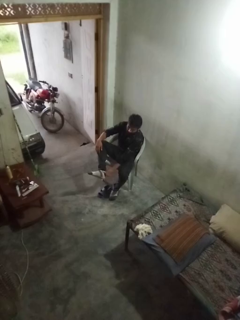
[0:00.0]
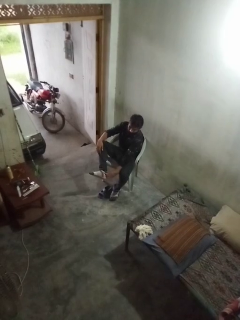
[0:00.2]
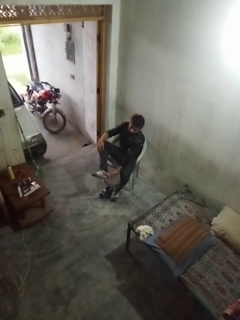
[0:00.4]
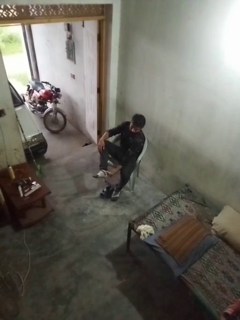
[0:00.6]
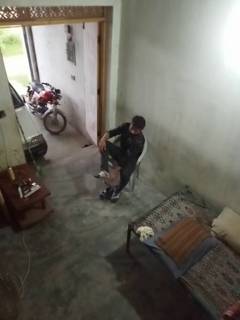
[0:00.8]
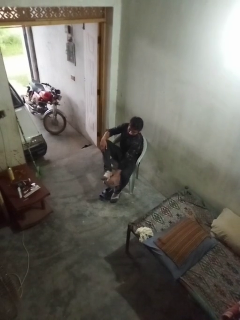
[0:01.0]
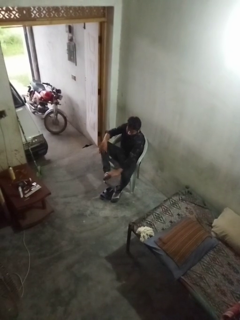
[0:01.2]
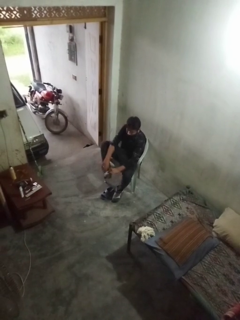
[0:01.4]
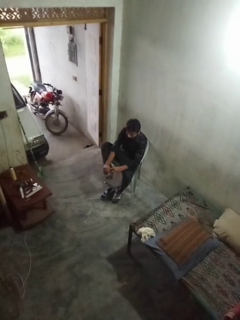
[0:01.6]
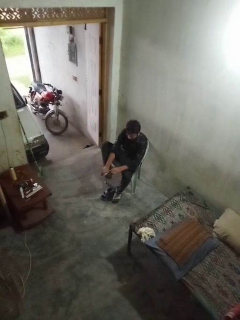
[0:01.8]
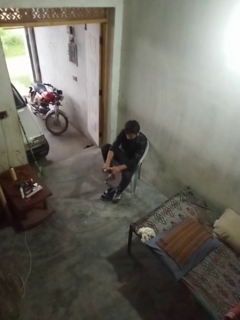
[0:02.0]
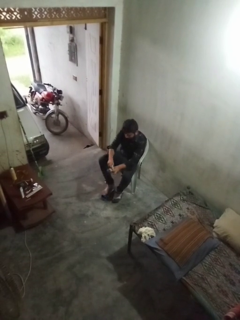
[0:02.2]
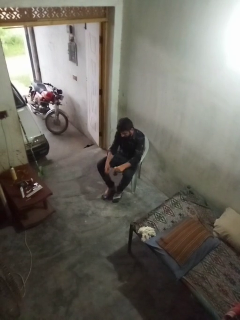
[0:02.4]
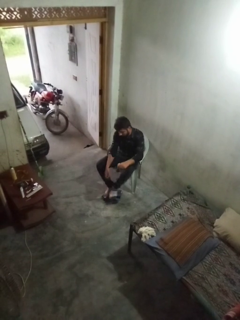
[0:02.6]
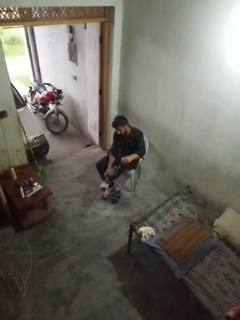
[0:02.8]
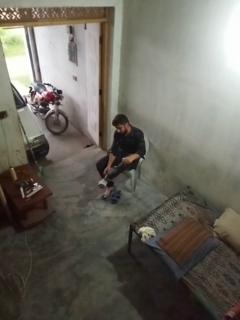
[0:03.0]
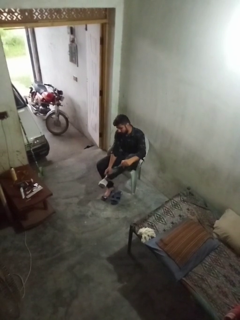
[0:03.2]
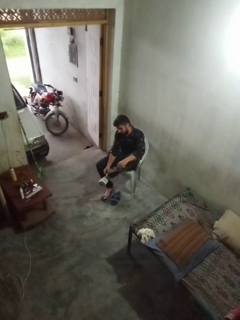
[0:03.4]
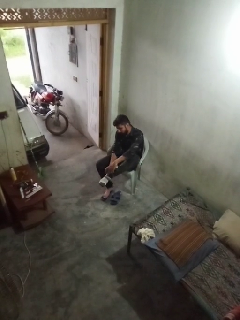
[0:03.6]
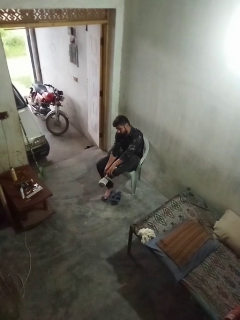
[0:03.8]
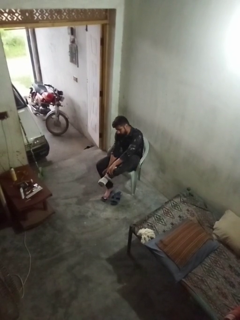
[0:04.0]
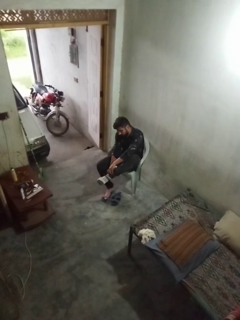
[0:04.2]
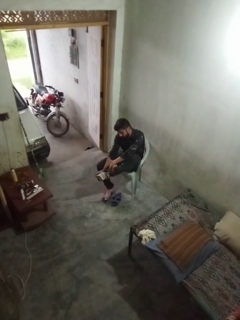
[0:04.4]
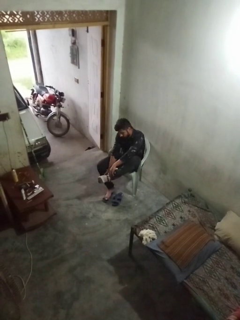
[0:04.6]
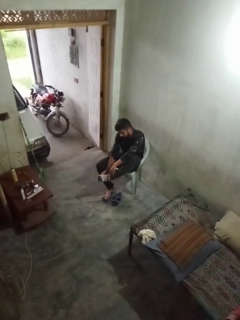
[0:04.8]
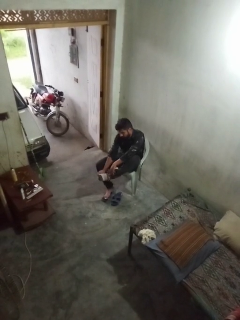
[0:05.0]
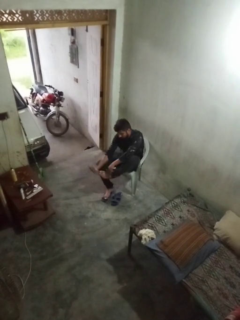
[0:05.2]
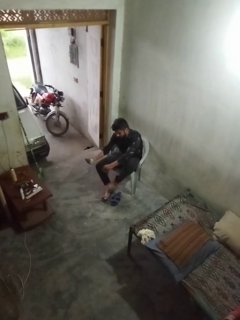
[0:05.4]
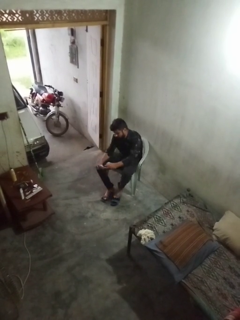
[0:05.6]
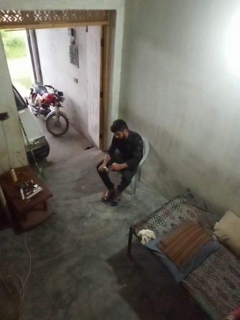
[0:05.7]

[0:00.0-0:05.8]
person takes off socks

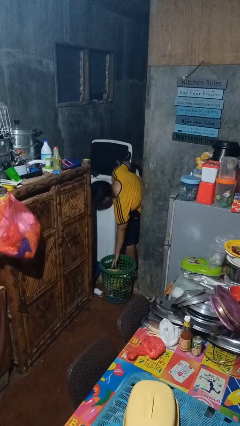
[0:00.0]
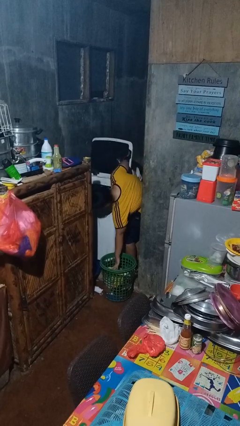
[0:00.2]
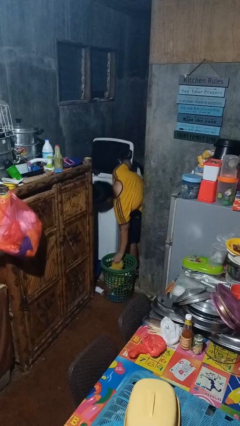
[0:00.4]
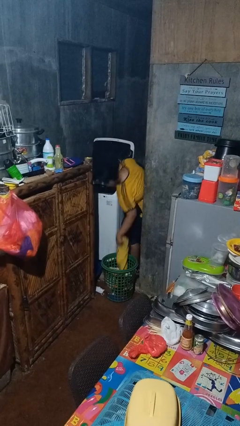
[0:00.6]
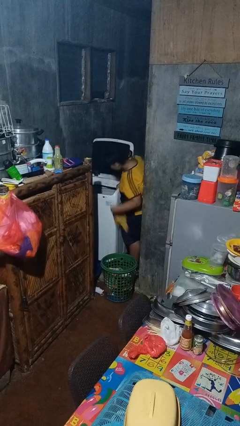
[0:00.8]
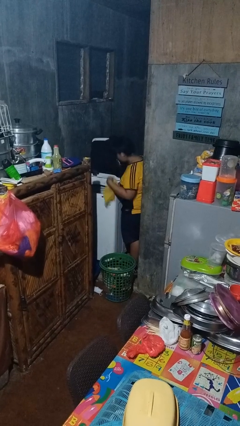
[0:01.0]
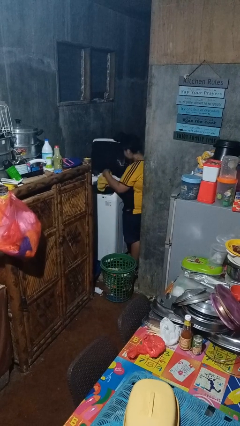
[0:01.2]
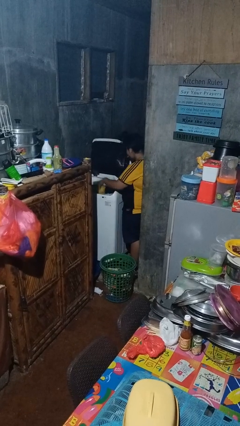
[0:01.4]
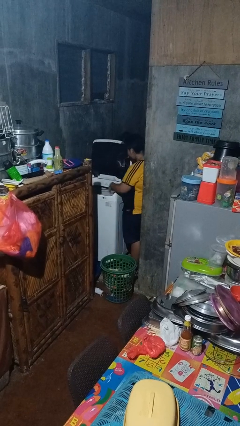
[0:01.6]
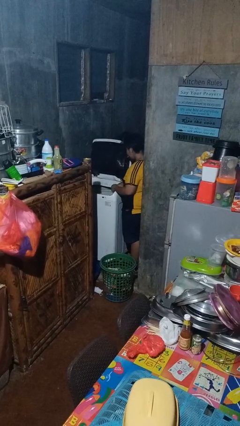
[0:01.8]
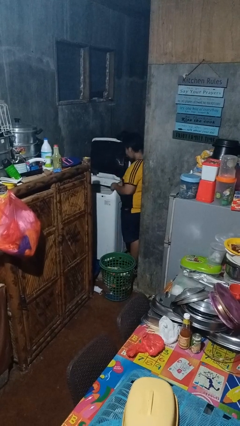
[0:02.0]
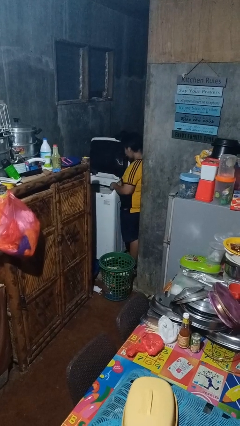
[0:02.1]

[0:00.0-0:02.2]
person loads clotheswasher

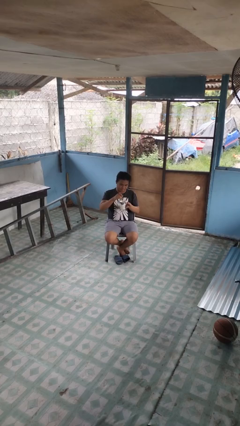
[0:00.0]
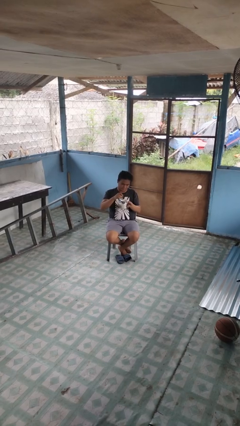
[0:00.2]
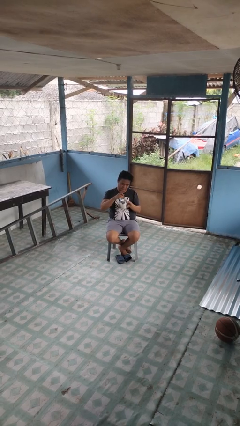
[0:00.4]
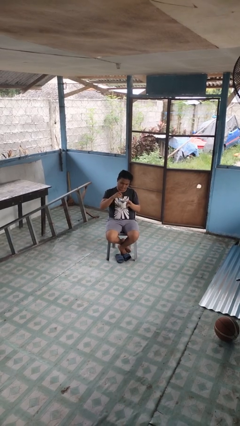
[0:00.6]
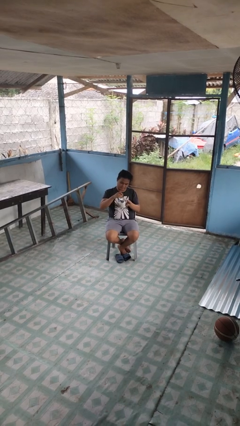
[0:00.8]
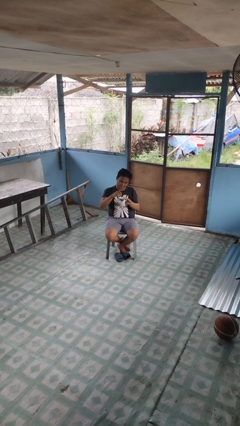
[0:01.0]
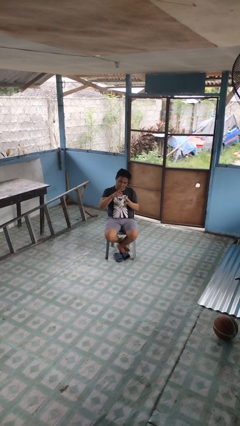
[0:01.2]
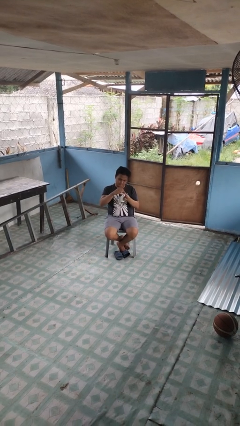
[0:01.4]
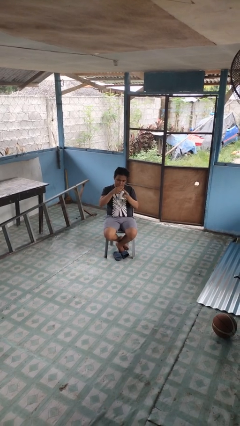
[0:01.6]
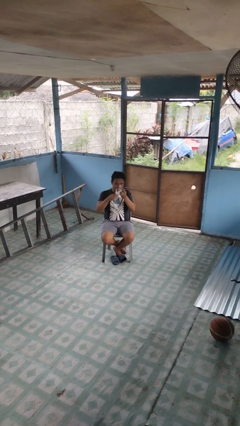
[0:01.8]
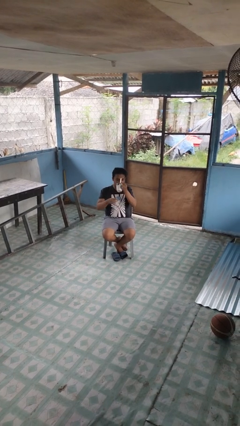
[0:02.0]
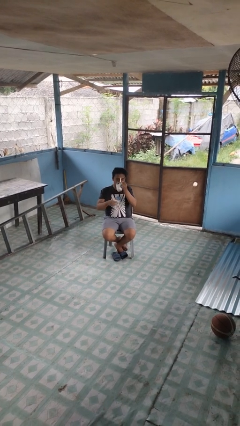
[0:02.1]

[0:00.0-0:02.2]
person stirs mug

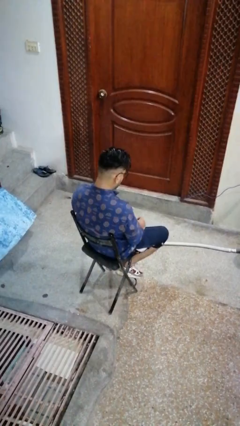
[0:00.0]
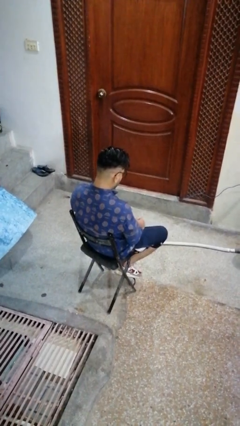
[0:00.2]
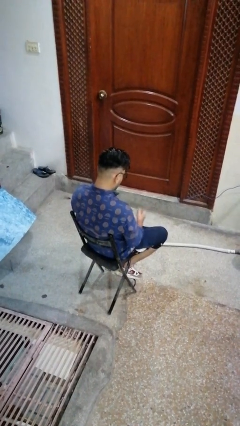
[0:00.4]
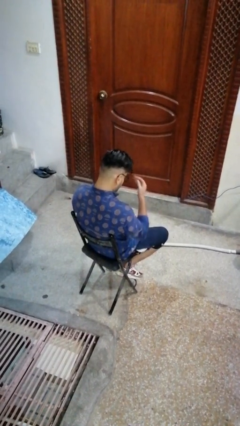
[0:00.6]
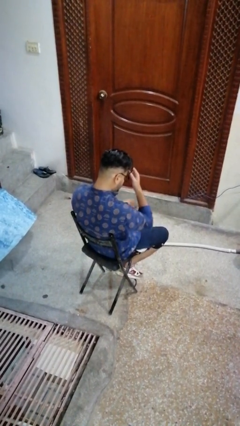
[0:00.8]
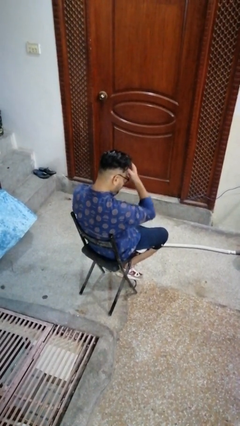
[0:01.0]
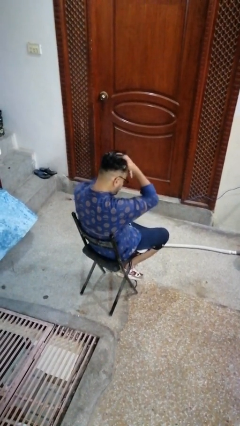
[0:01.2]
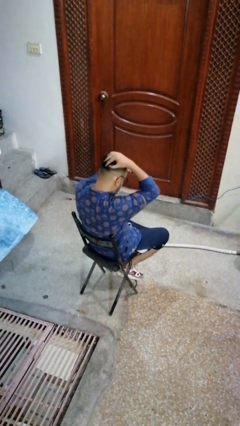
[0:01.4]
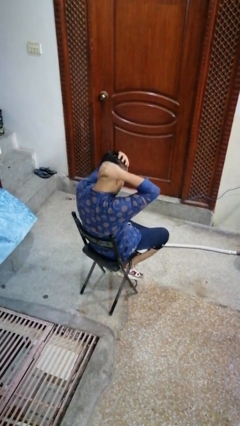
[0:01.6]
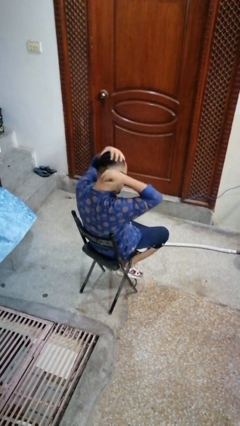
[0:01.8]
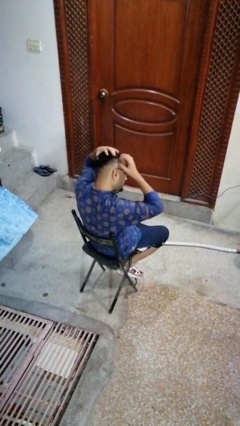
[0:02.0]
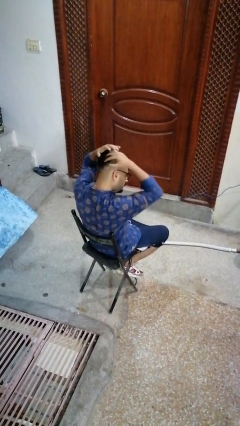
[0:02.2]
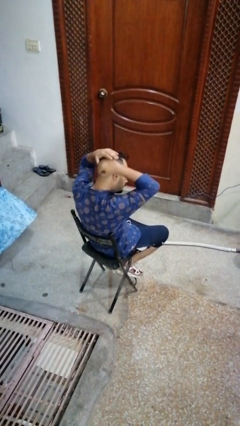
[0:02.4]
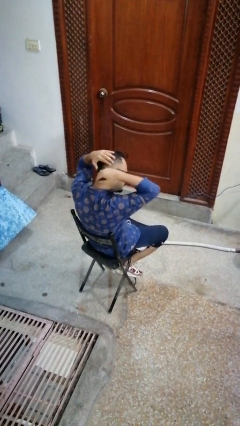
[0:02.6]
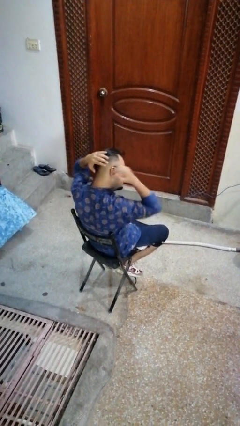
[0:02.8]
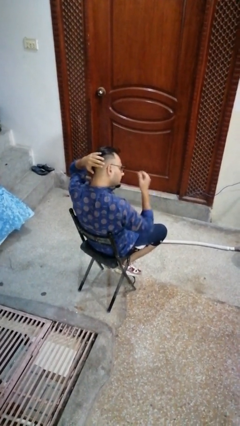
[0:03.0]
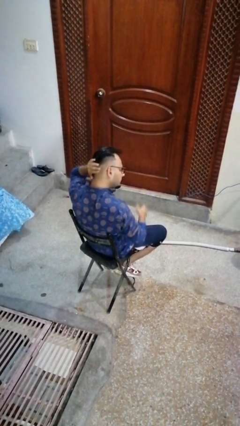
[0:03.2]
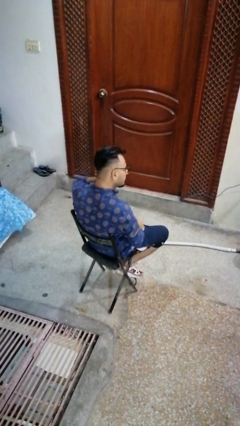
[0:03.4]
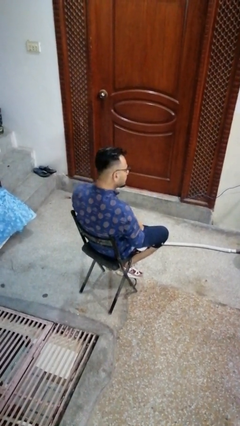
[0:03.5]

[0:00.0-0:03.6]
person strokes hair

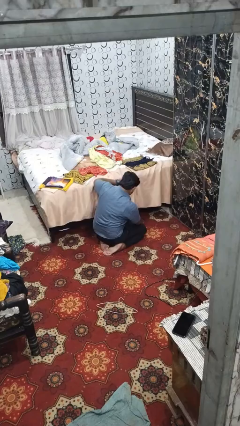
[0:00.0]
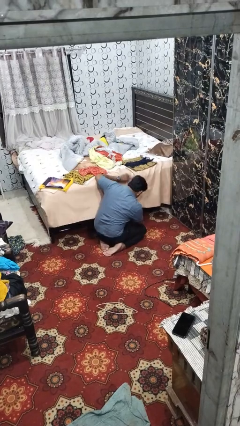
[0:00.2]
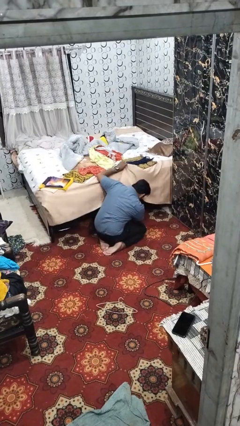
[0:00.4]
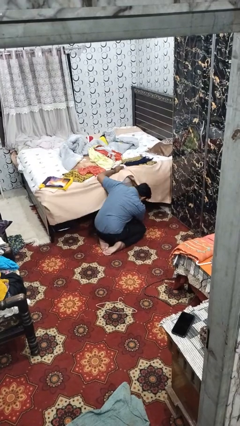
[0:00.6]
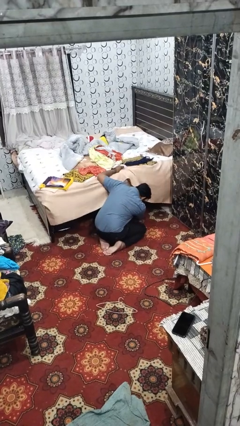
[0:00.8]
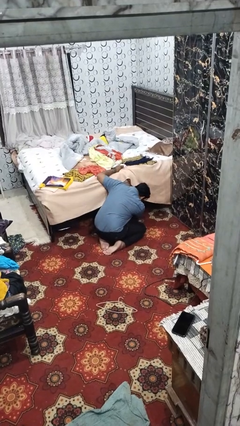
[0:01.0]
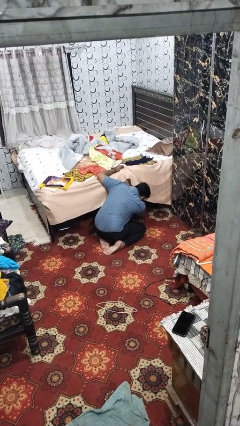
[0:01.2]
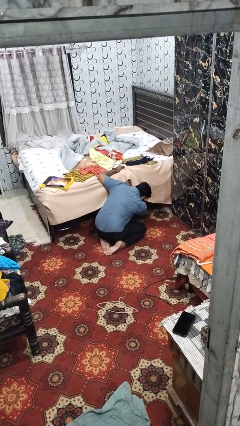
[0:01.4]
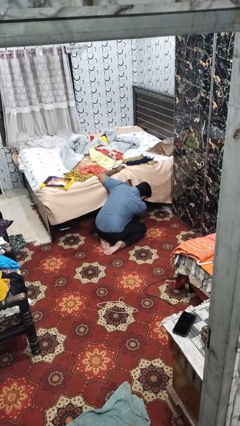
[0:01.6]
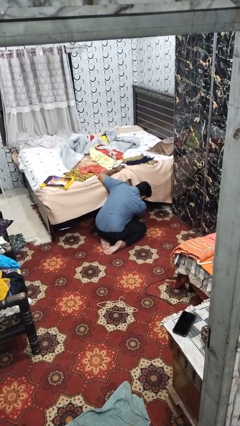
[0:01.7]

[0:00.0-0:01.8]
person searches under bed

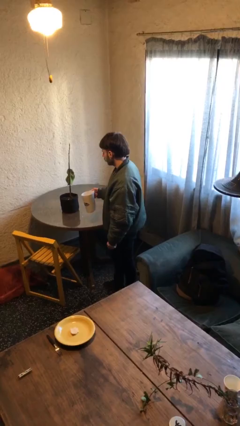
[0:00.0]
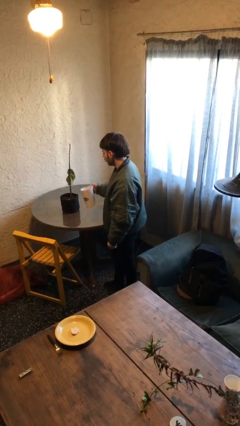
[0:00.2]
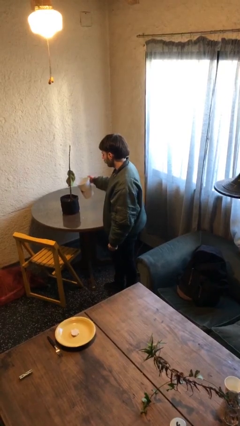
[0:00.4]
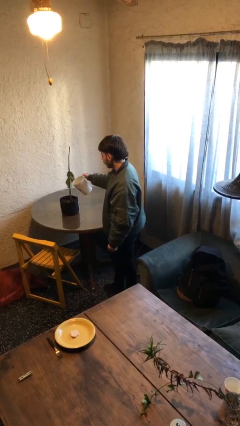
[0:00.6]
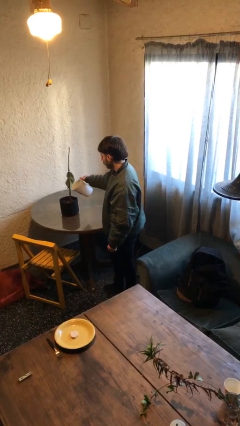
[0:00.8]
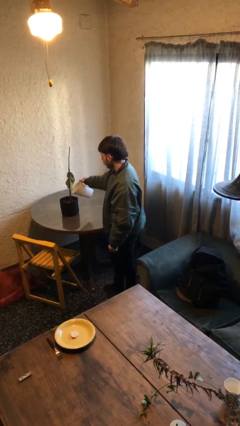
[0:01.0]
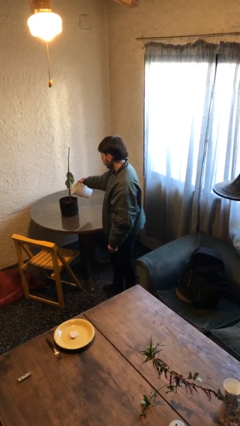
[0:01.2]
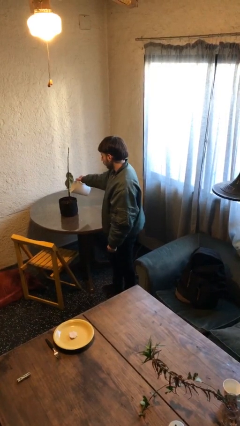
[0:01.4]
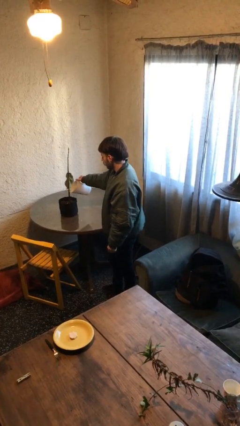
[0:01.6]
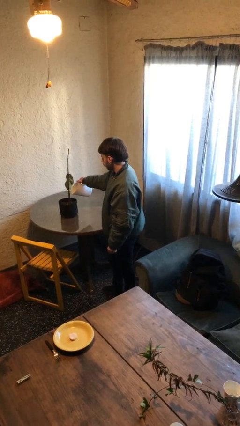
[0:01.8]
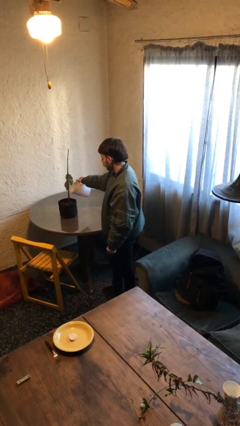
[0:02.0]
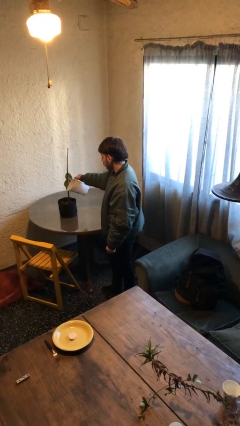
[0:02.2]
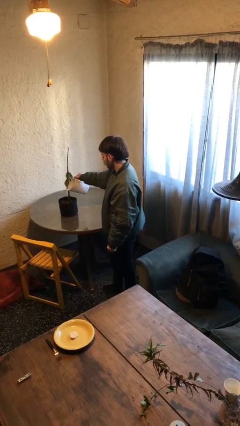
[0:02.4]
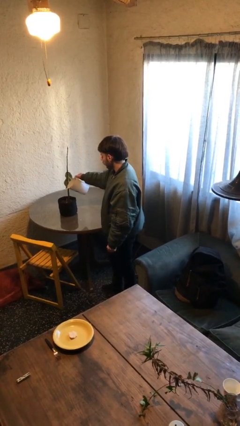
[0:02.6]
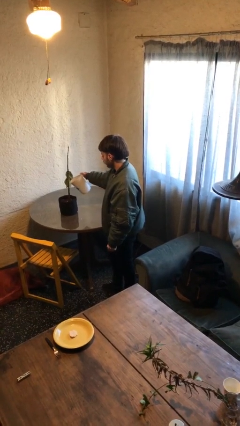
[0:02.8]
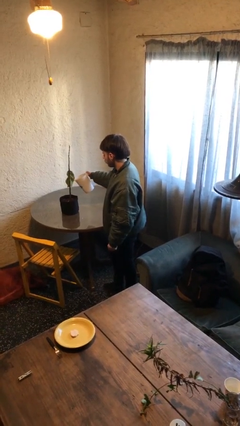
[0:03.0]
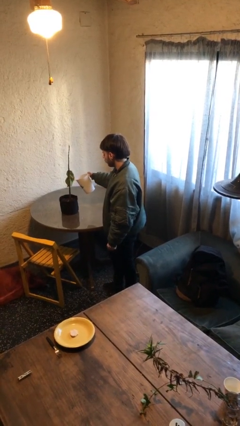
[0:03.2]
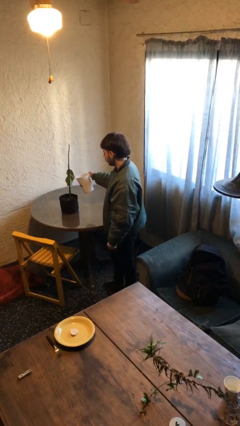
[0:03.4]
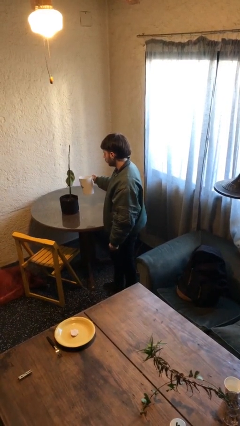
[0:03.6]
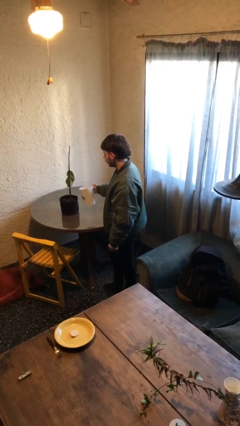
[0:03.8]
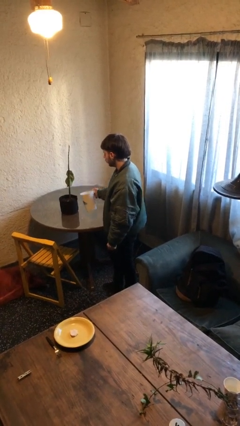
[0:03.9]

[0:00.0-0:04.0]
person waters houseplant
